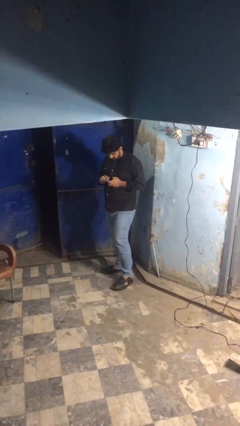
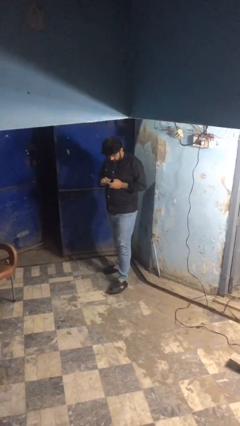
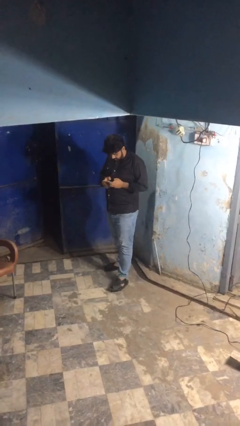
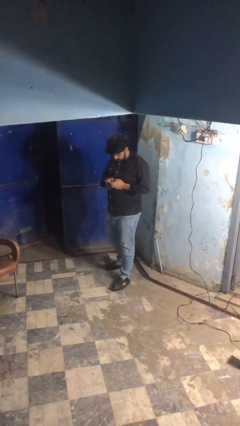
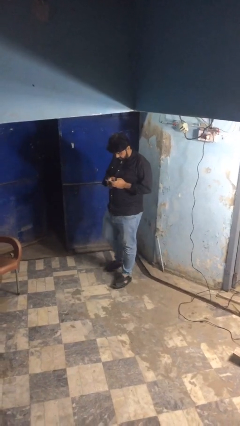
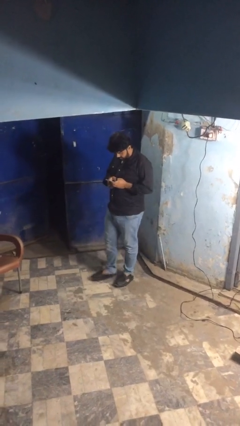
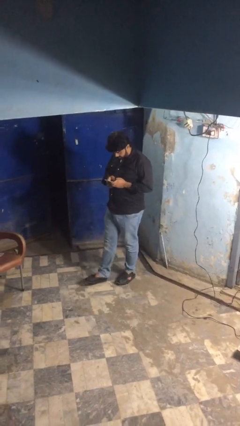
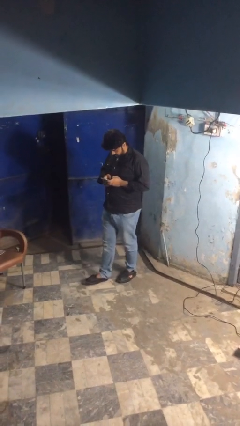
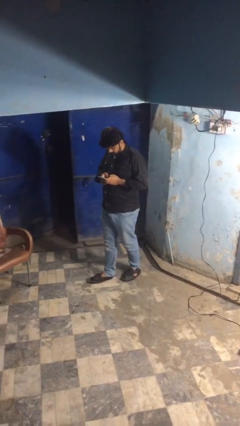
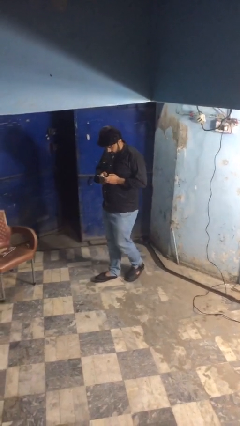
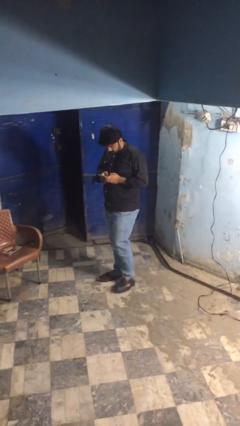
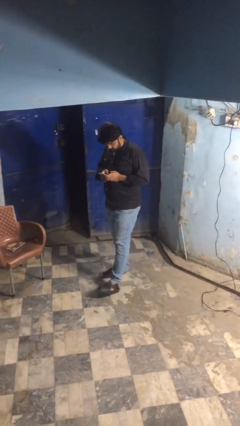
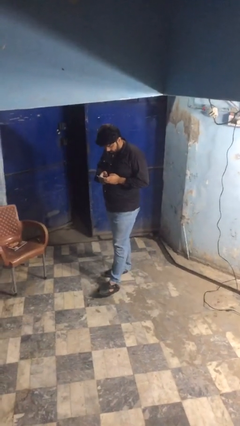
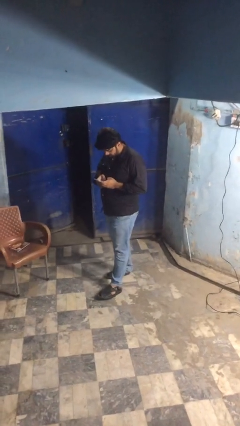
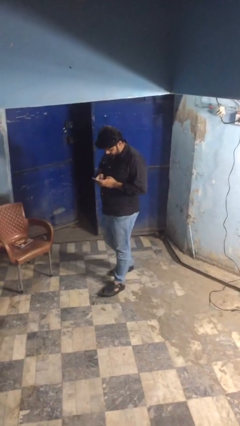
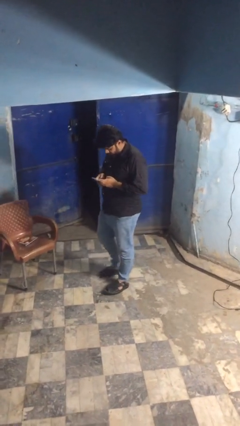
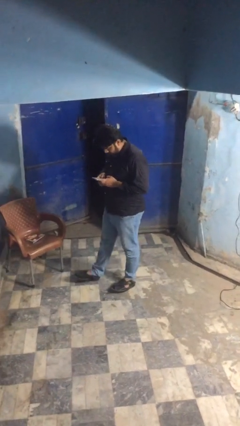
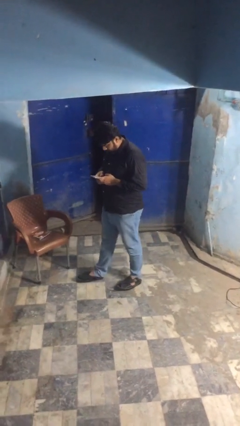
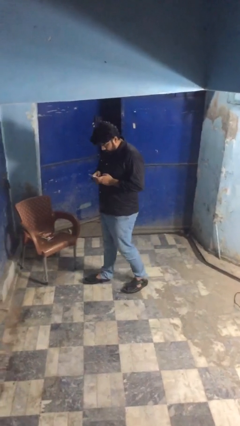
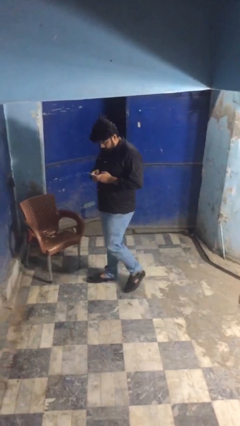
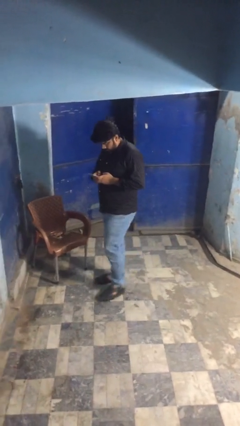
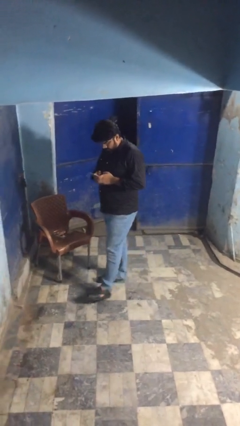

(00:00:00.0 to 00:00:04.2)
person texts on phone

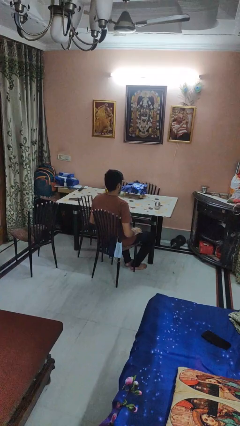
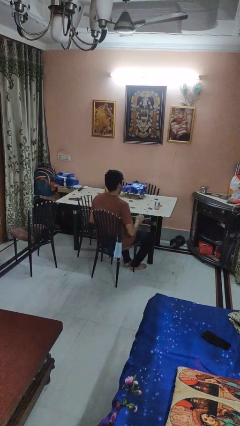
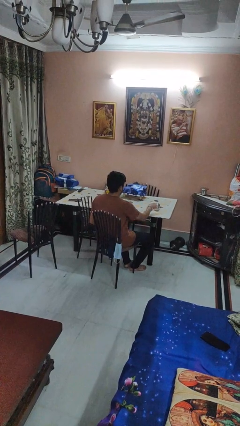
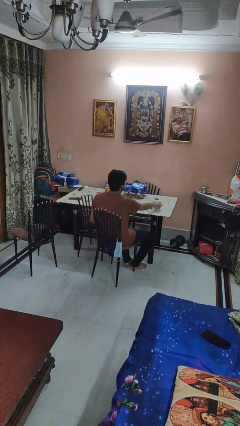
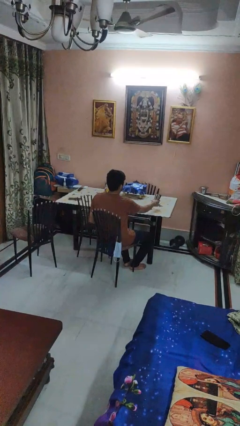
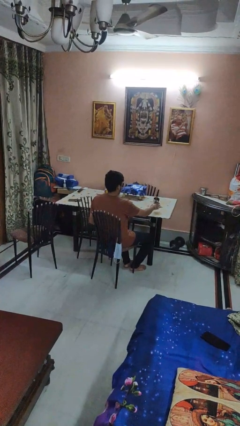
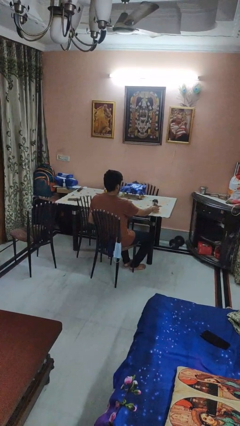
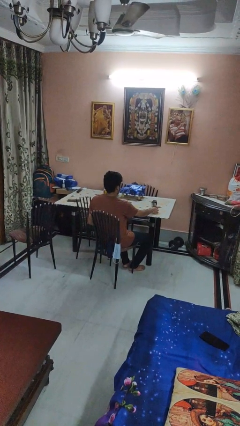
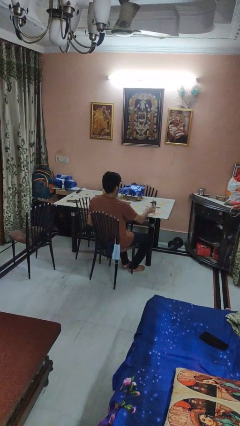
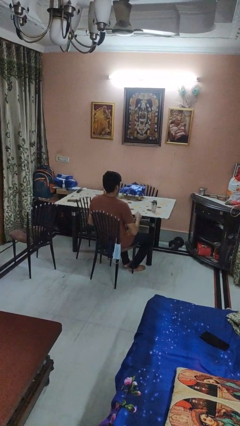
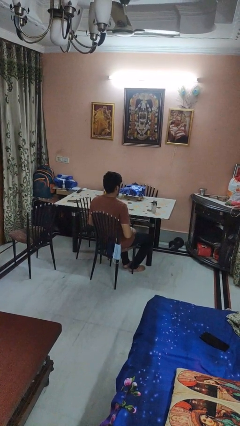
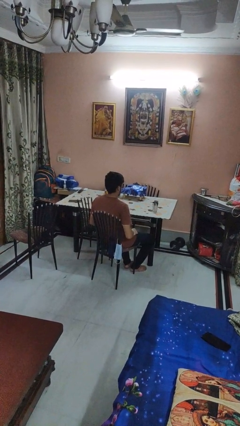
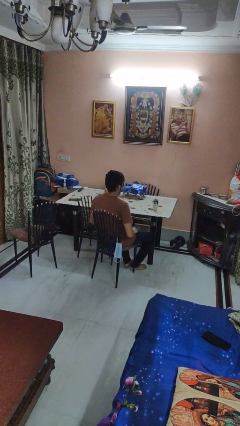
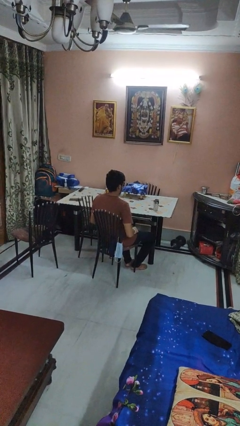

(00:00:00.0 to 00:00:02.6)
person sets upright glass

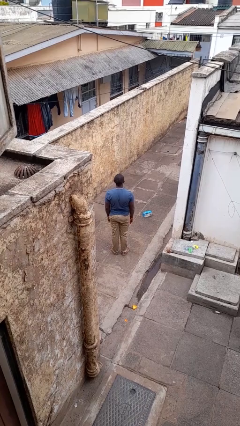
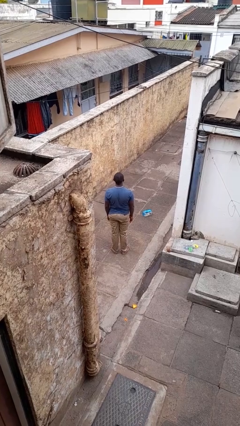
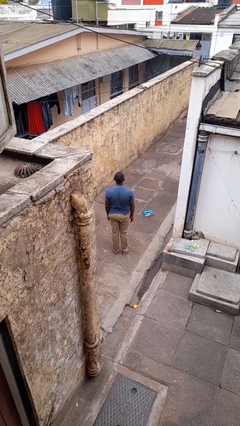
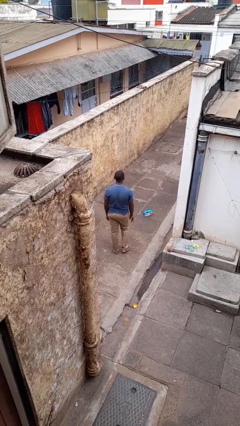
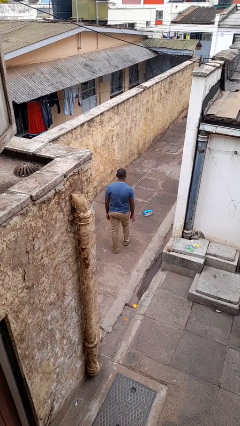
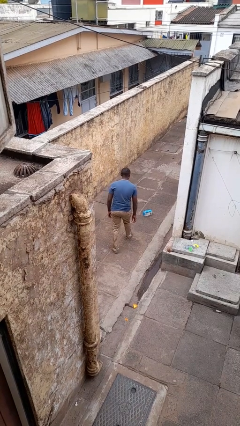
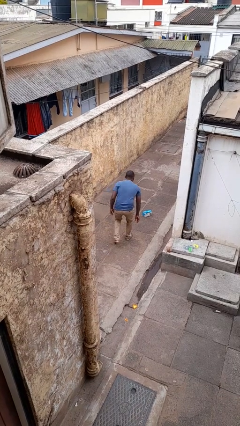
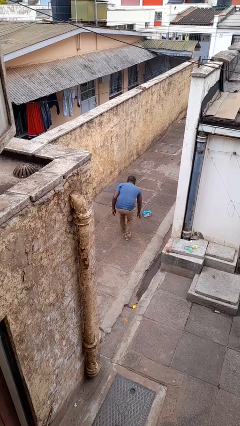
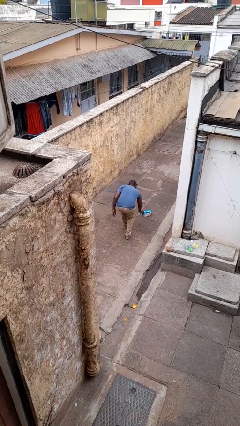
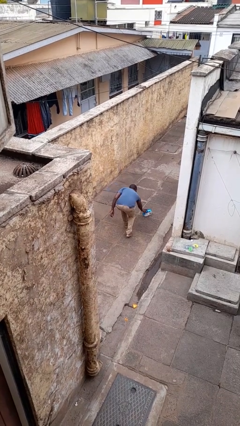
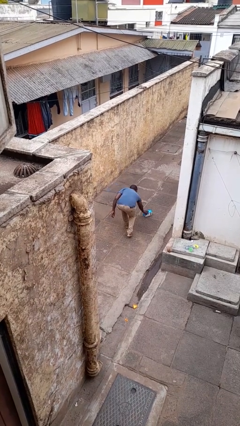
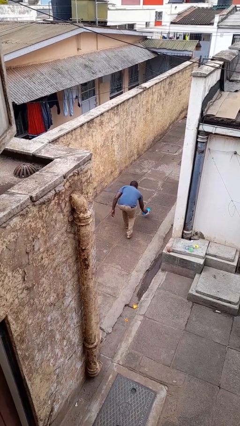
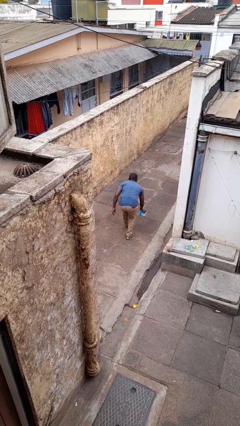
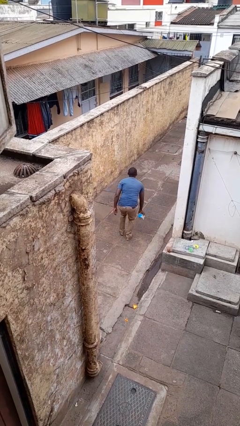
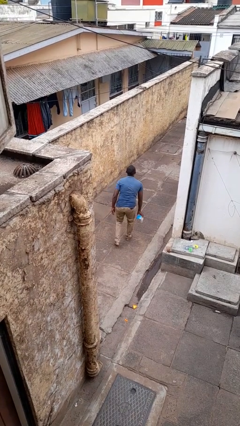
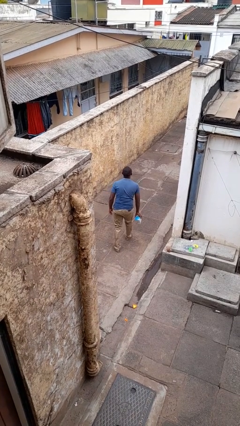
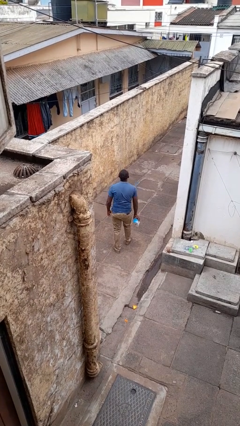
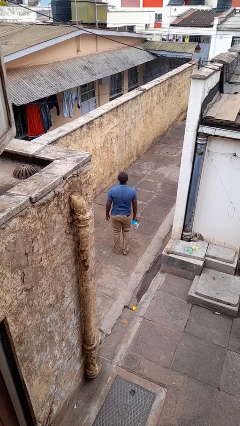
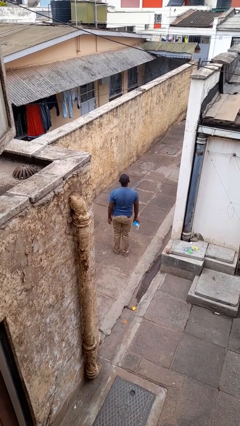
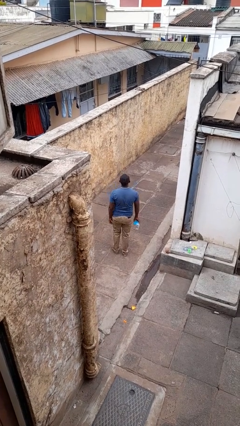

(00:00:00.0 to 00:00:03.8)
person picks up object from floor

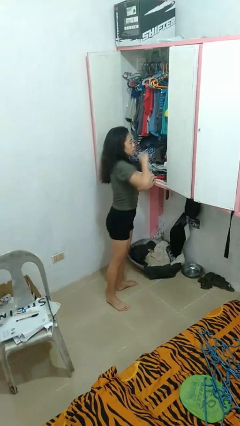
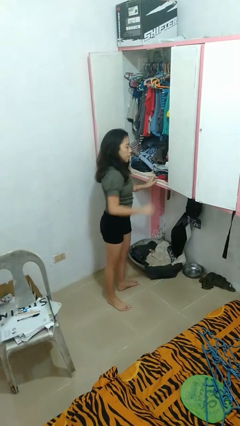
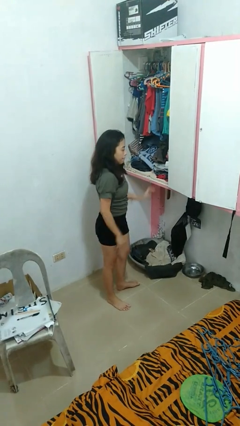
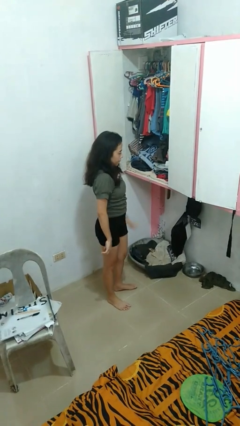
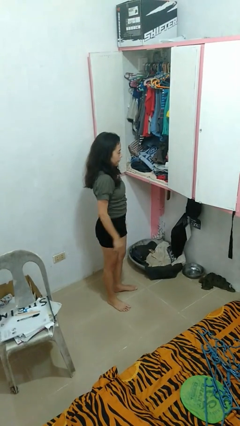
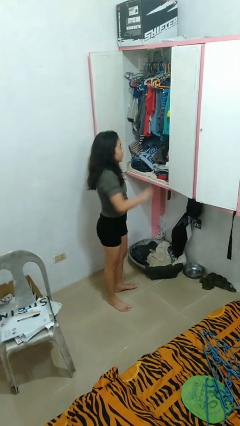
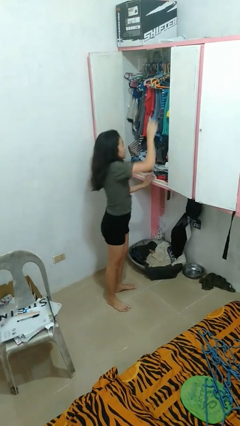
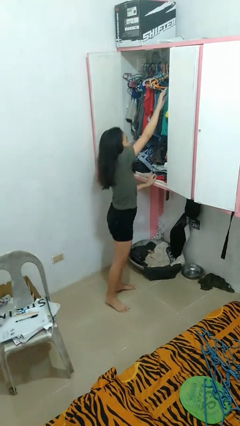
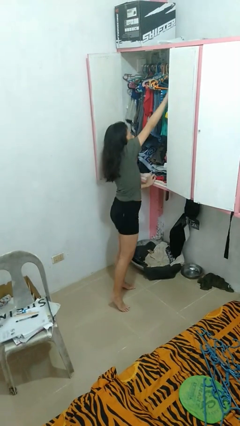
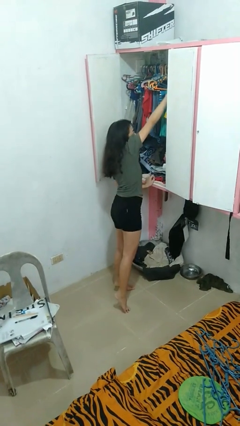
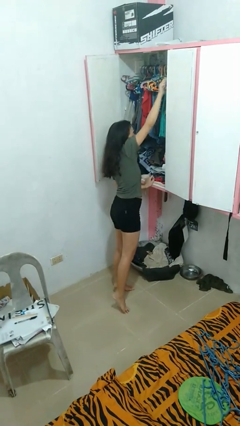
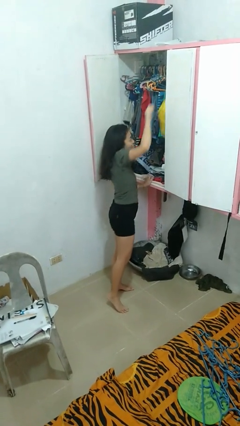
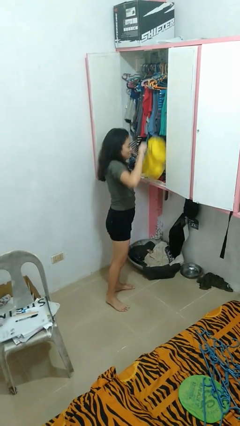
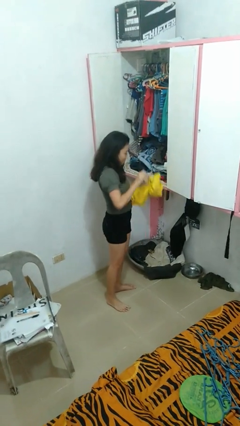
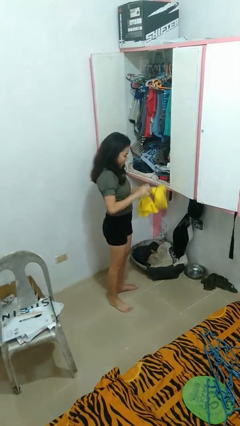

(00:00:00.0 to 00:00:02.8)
person takes clothes from closet

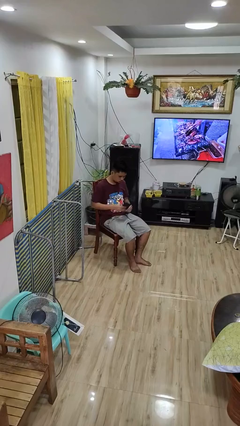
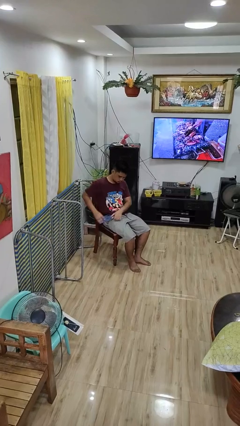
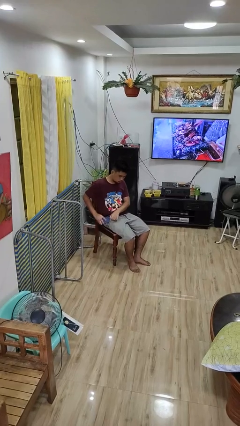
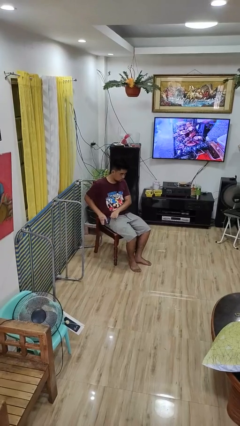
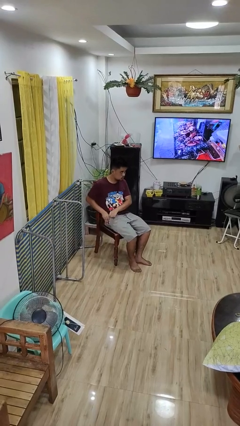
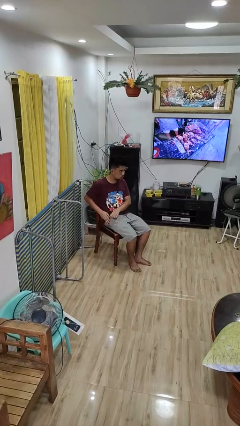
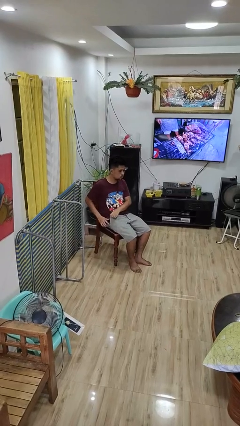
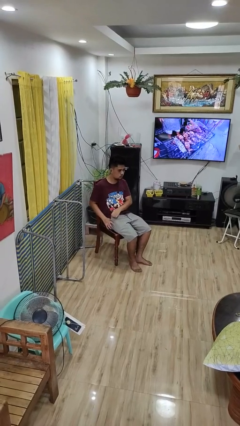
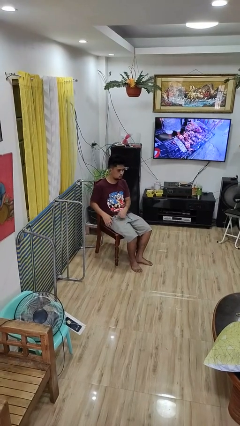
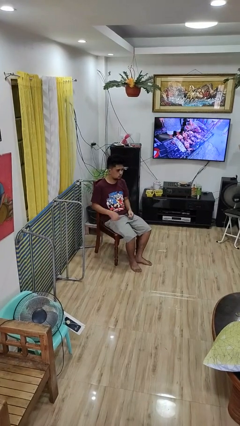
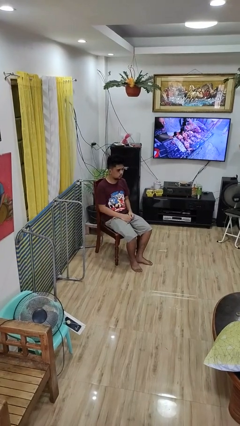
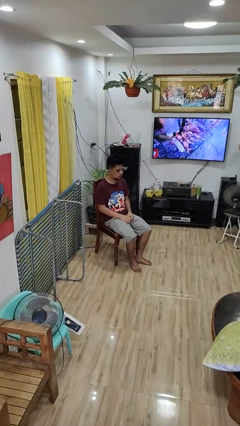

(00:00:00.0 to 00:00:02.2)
person puts phone into pocket

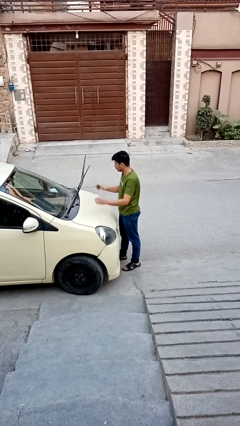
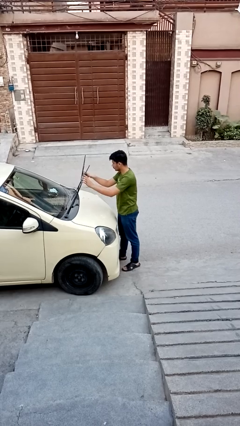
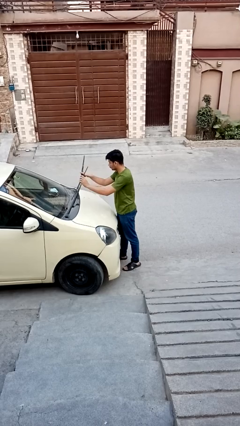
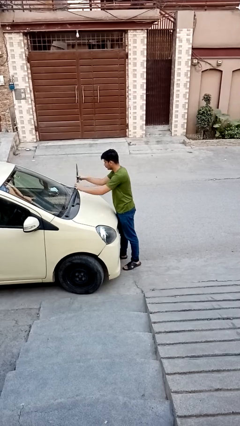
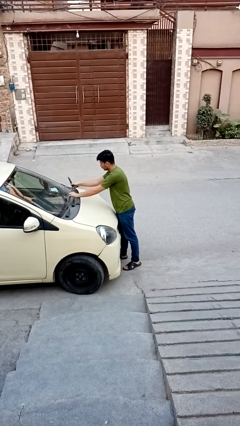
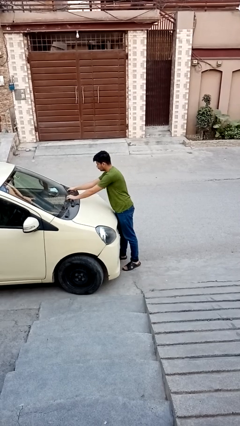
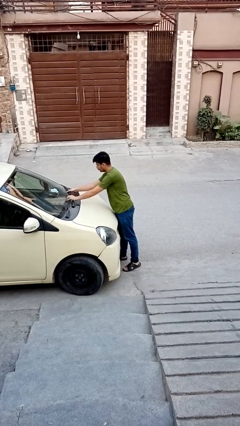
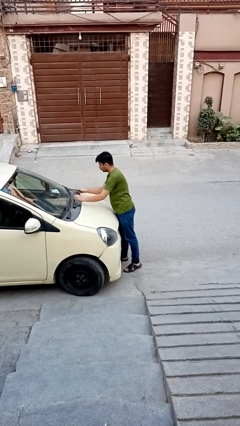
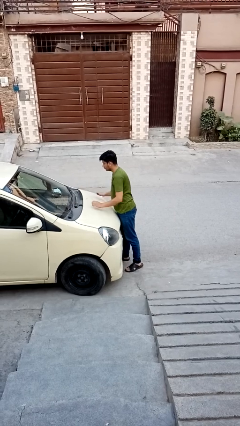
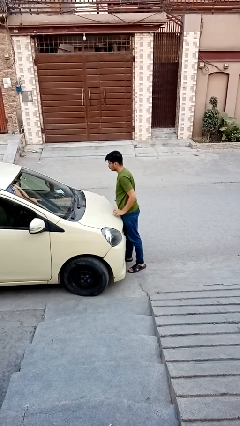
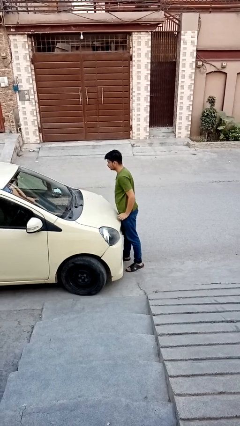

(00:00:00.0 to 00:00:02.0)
person flips down car wipers
